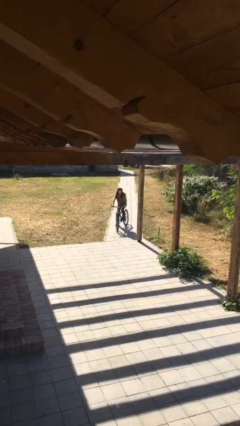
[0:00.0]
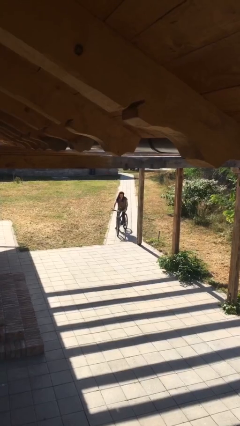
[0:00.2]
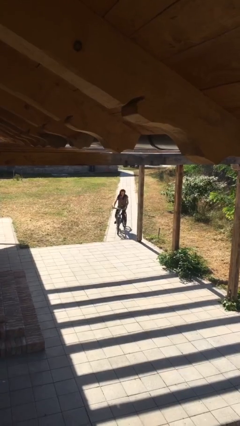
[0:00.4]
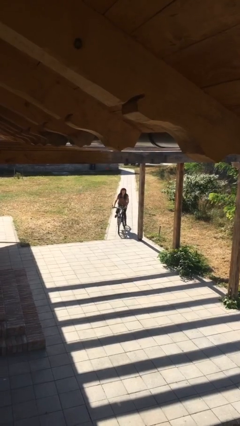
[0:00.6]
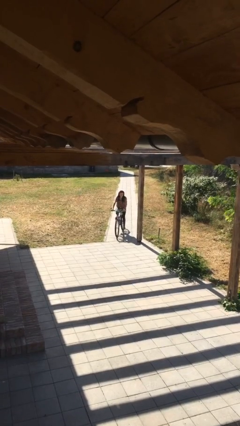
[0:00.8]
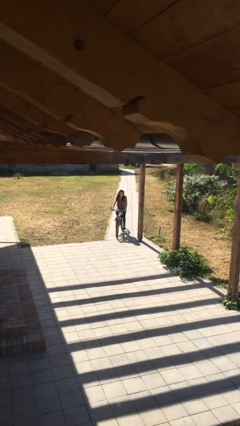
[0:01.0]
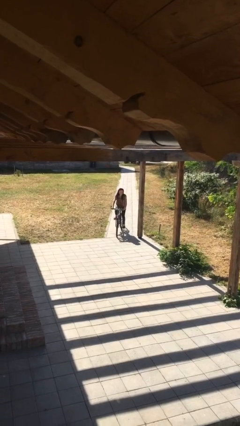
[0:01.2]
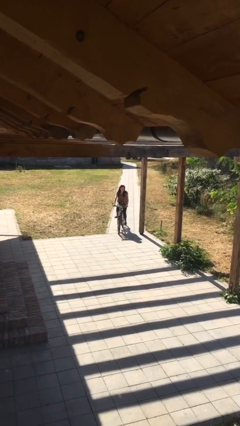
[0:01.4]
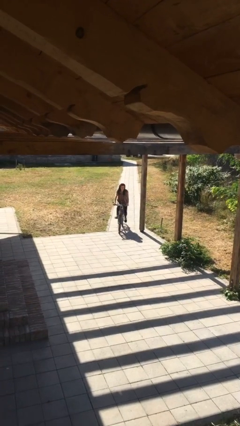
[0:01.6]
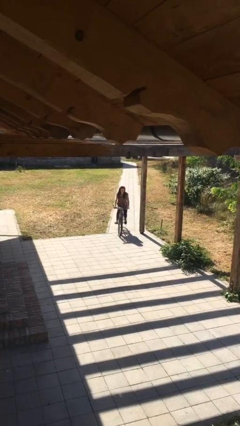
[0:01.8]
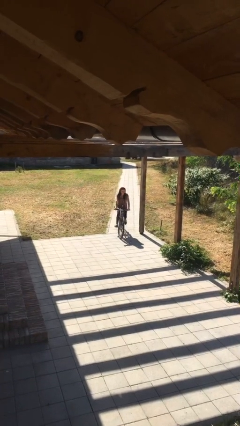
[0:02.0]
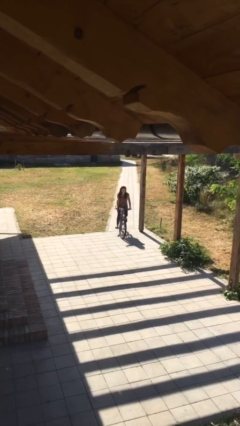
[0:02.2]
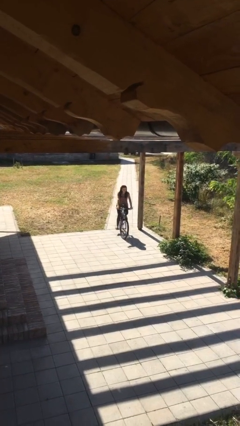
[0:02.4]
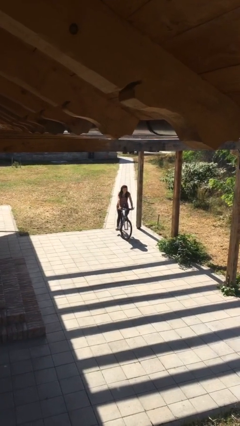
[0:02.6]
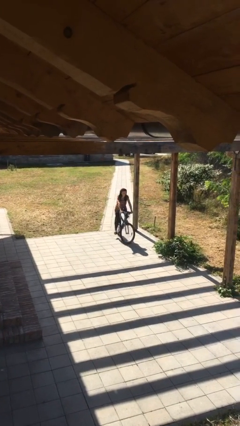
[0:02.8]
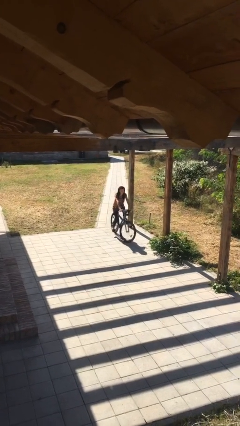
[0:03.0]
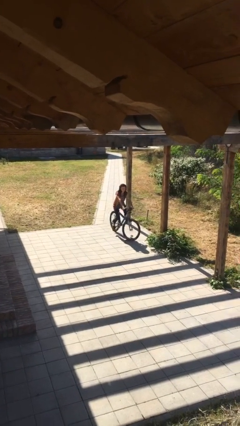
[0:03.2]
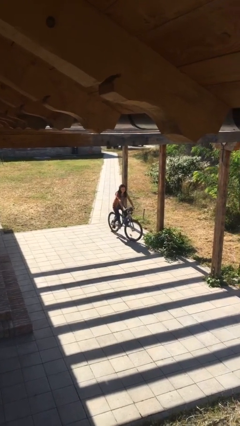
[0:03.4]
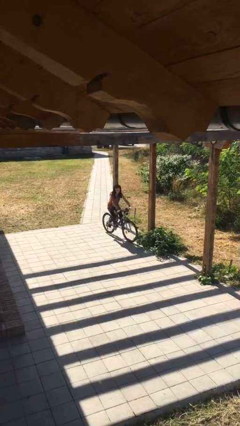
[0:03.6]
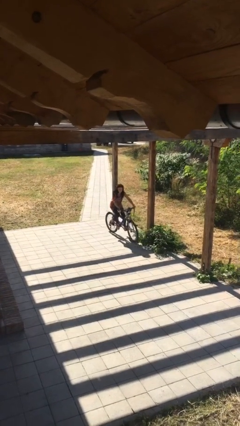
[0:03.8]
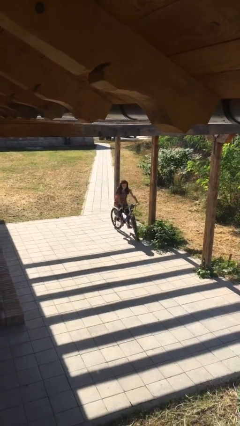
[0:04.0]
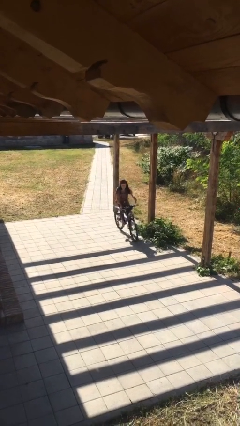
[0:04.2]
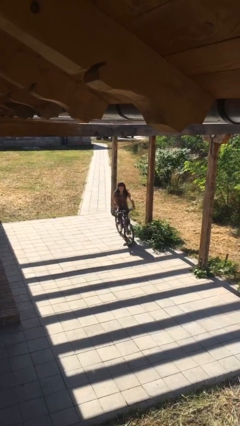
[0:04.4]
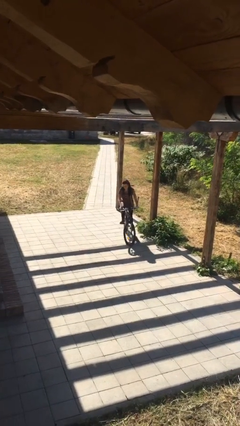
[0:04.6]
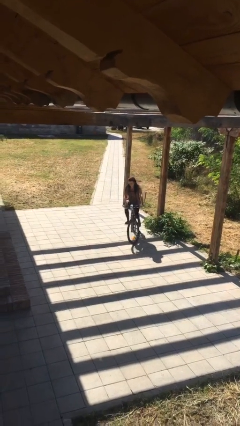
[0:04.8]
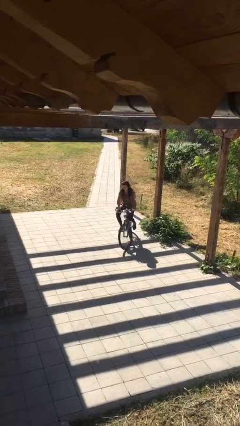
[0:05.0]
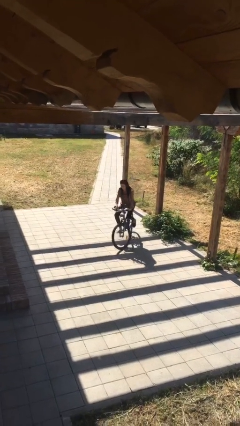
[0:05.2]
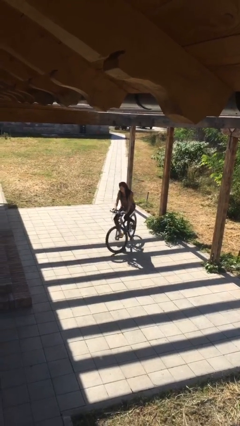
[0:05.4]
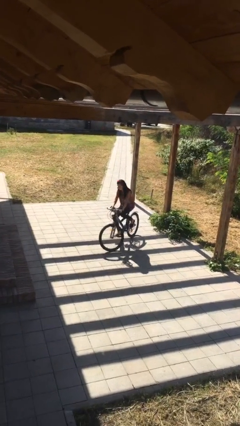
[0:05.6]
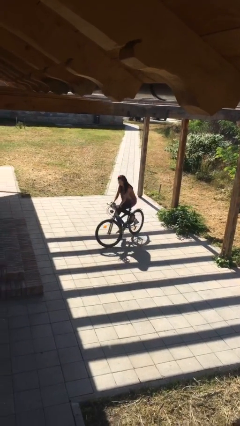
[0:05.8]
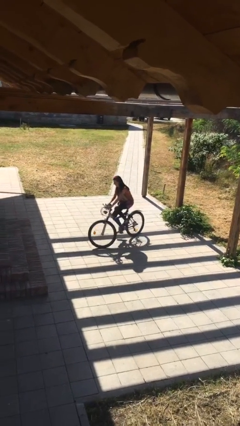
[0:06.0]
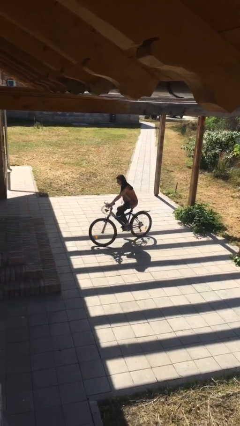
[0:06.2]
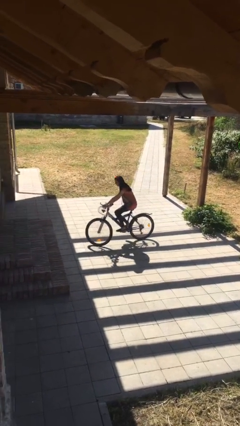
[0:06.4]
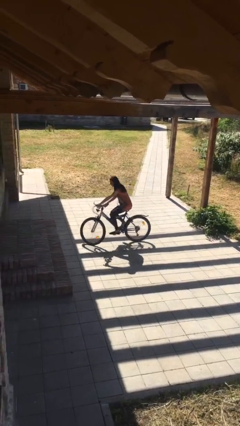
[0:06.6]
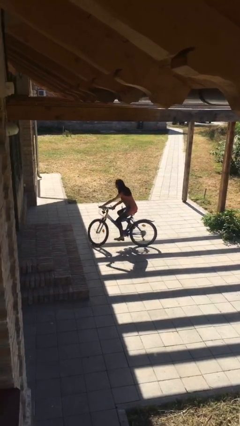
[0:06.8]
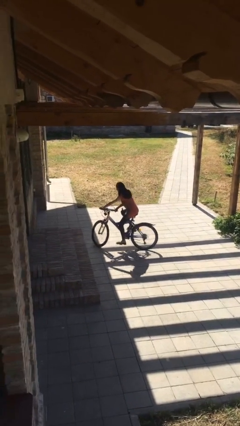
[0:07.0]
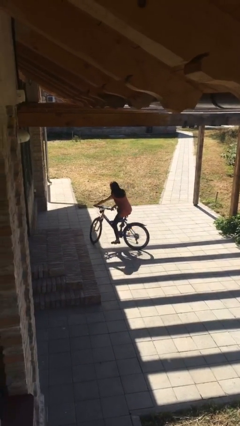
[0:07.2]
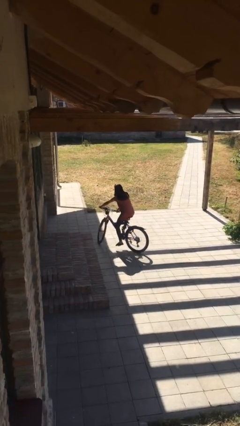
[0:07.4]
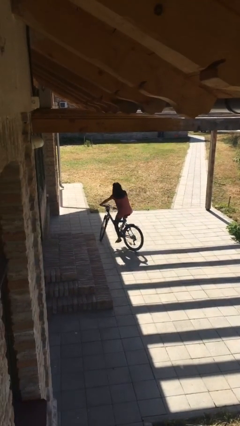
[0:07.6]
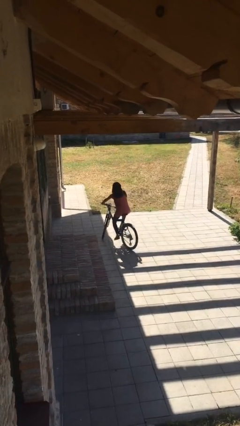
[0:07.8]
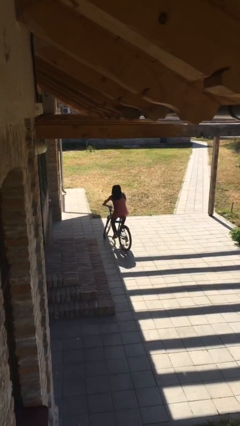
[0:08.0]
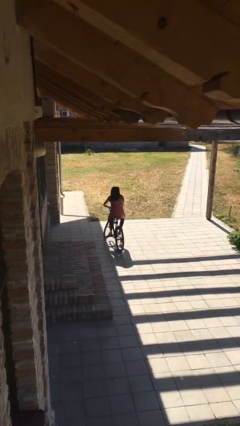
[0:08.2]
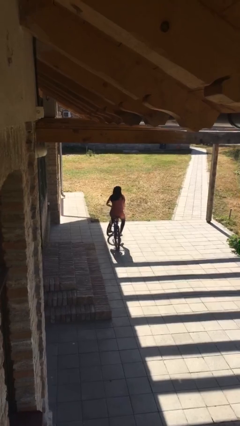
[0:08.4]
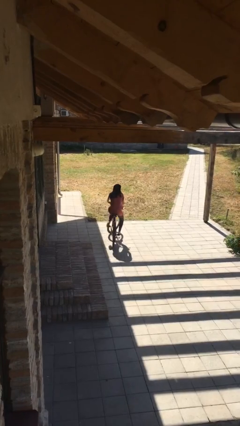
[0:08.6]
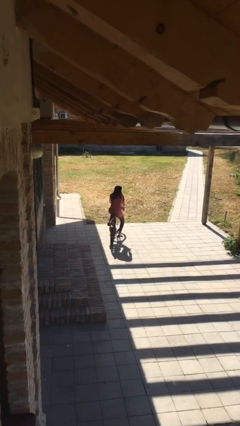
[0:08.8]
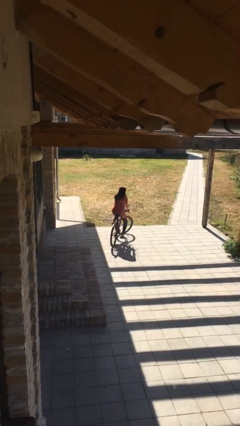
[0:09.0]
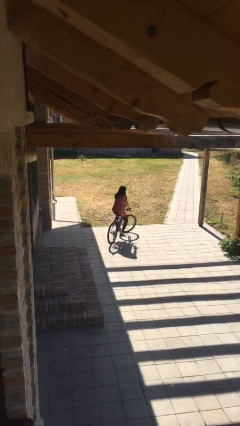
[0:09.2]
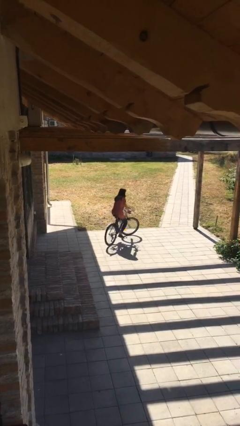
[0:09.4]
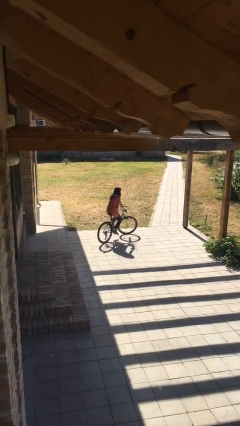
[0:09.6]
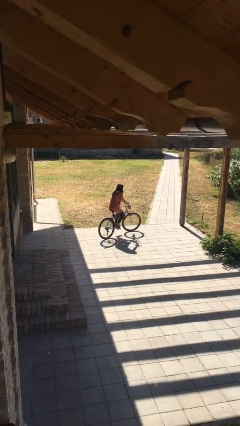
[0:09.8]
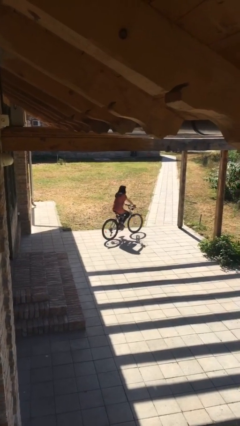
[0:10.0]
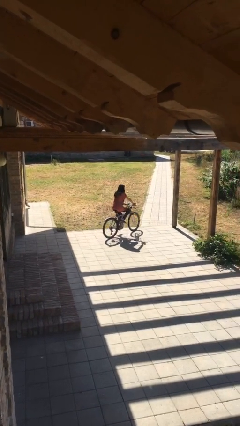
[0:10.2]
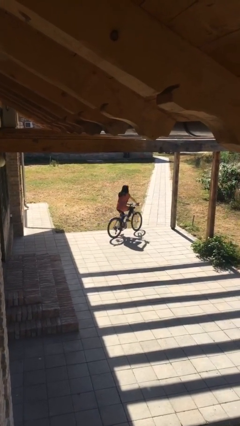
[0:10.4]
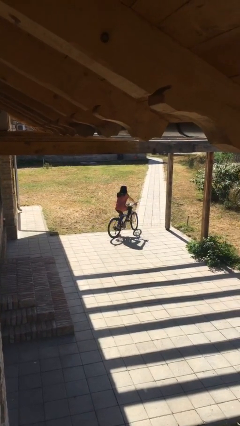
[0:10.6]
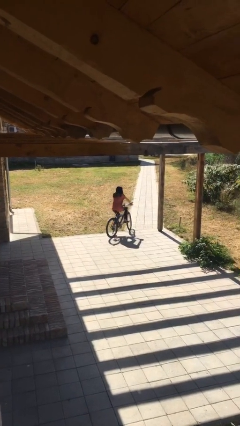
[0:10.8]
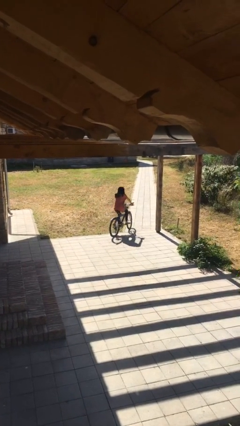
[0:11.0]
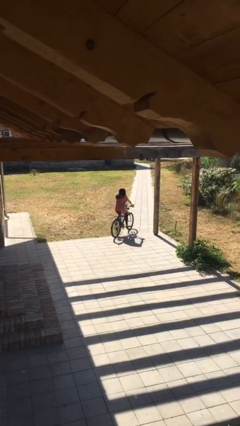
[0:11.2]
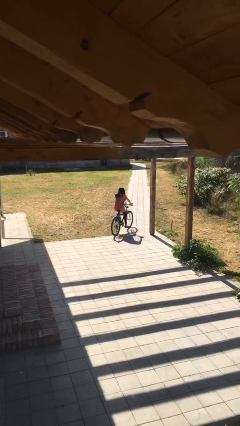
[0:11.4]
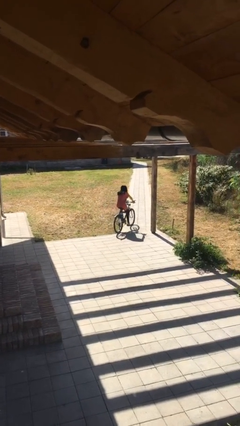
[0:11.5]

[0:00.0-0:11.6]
person rides bicycle

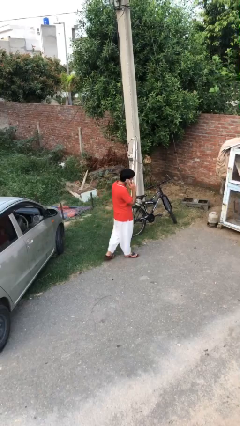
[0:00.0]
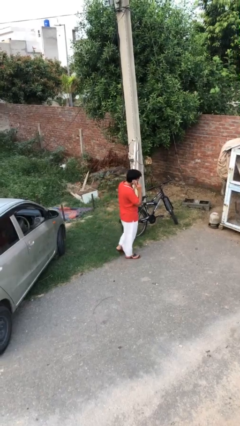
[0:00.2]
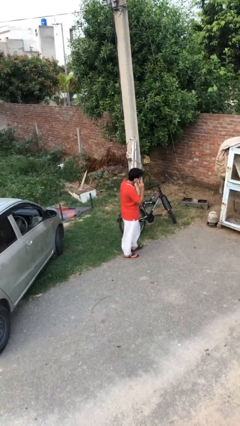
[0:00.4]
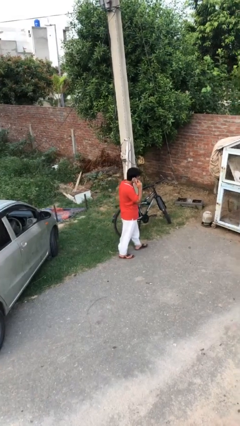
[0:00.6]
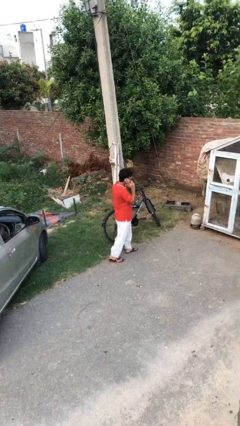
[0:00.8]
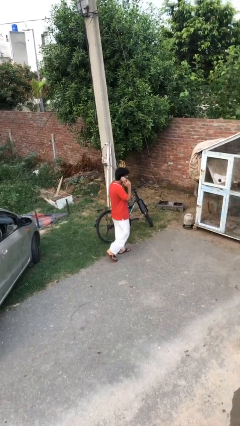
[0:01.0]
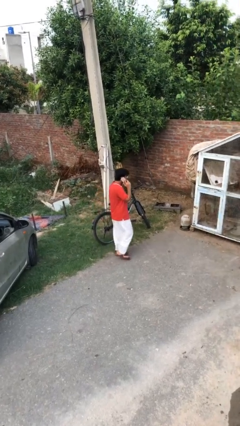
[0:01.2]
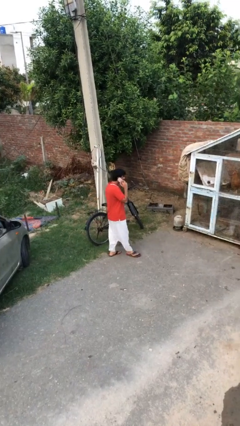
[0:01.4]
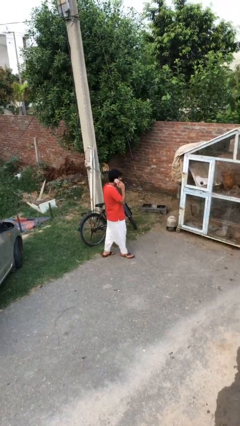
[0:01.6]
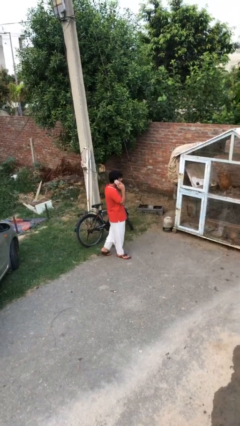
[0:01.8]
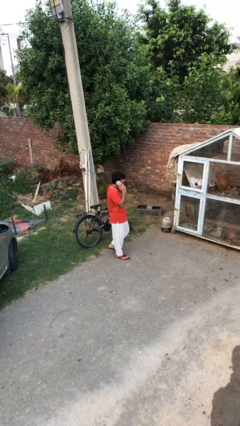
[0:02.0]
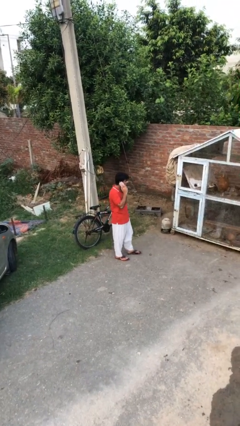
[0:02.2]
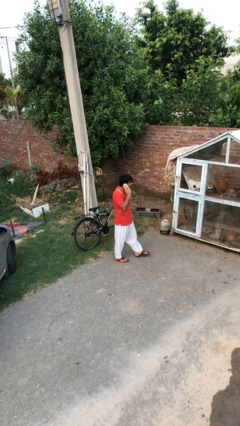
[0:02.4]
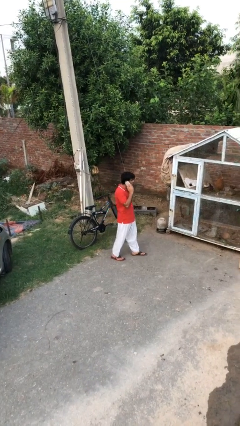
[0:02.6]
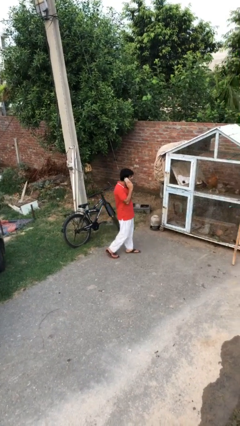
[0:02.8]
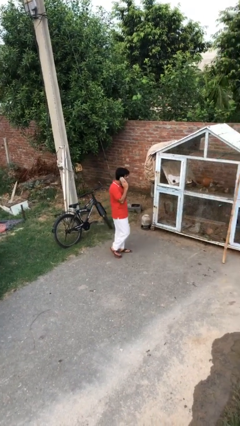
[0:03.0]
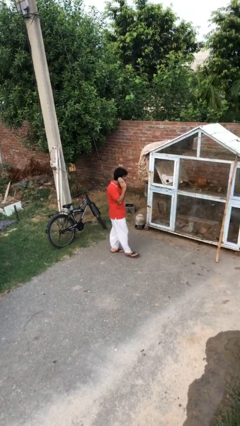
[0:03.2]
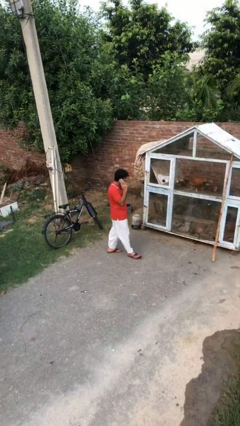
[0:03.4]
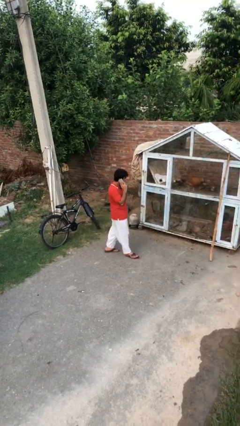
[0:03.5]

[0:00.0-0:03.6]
person talks on phone

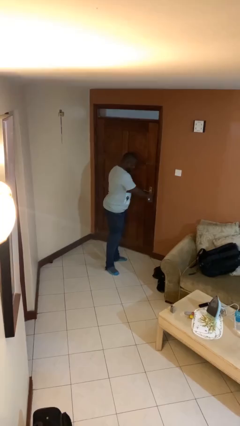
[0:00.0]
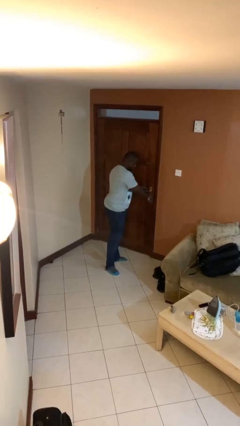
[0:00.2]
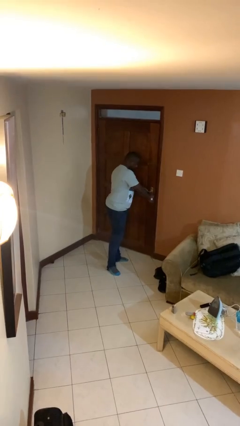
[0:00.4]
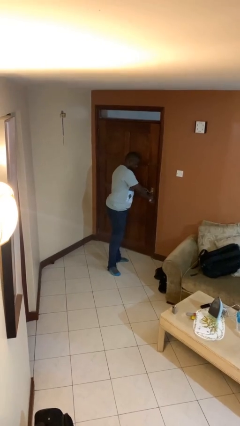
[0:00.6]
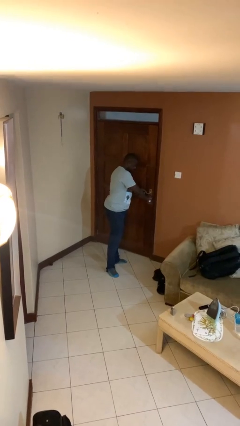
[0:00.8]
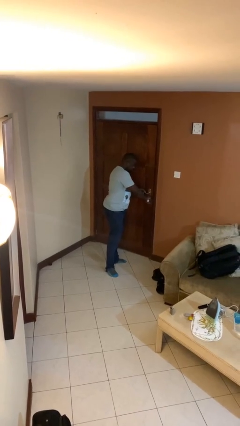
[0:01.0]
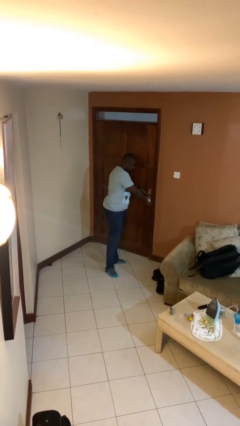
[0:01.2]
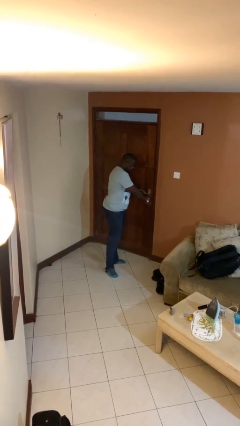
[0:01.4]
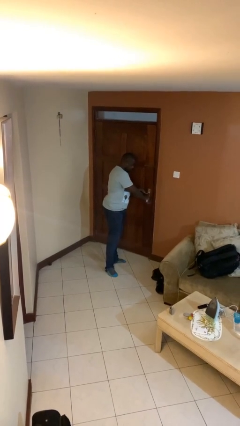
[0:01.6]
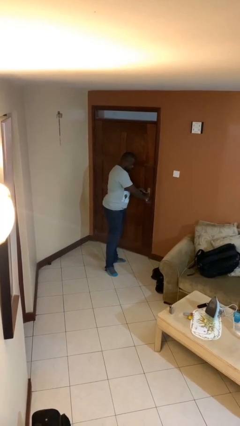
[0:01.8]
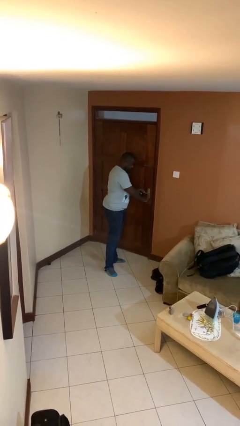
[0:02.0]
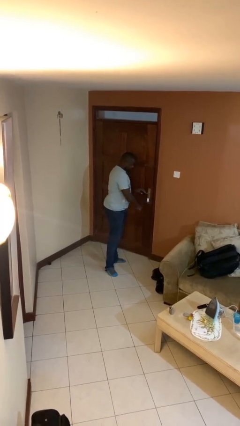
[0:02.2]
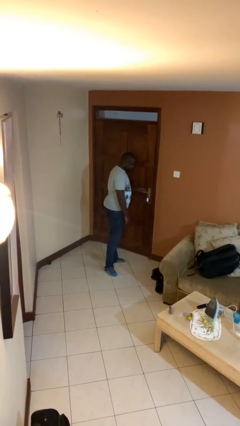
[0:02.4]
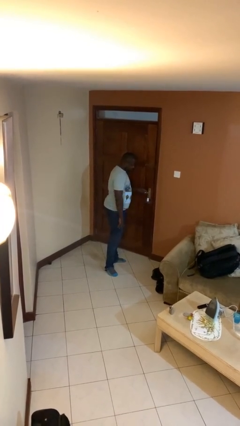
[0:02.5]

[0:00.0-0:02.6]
person unlocks door with keys

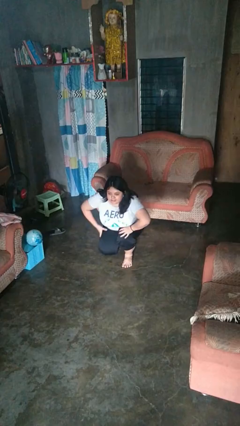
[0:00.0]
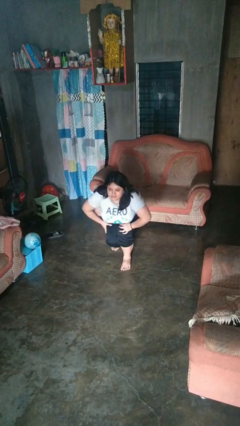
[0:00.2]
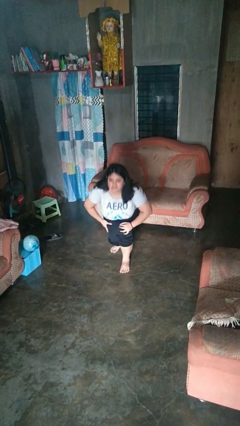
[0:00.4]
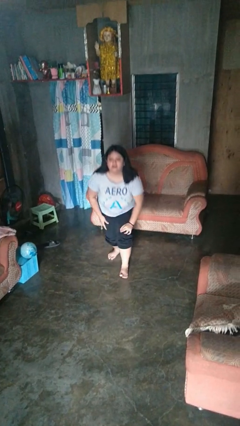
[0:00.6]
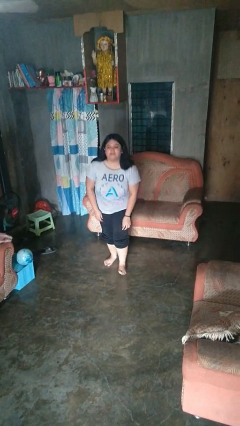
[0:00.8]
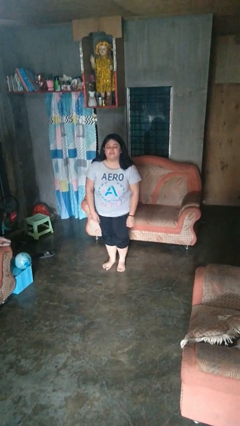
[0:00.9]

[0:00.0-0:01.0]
person stands up from floor
